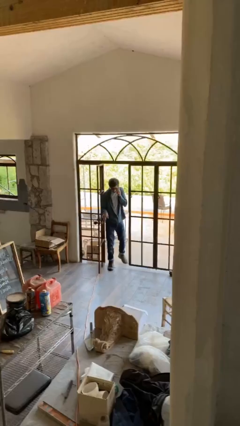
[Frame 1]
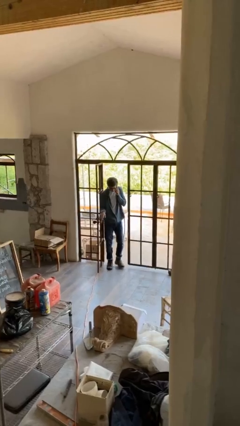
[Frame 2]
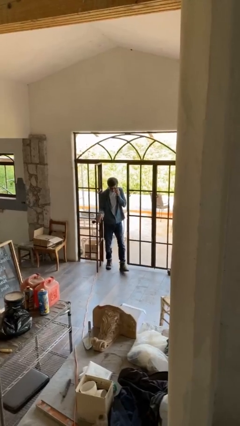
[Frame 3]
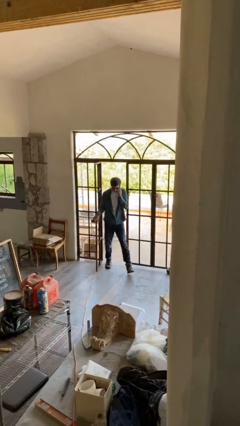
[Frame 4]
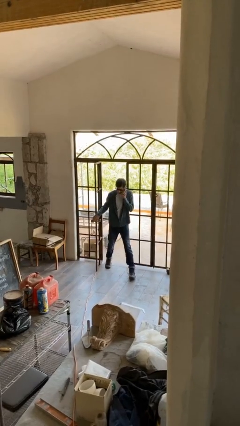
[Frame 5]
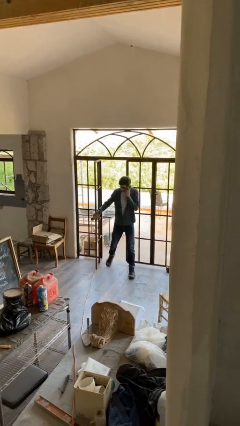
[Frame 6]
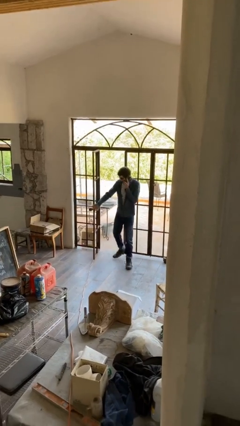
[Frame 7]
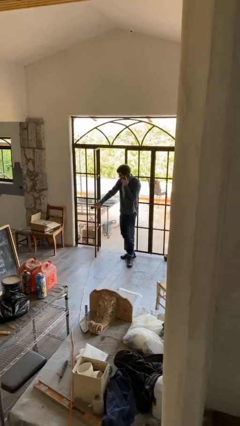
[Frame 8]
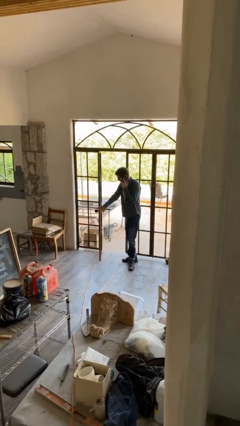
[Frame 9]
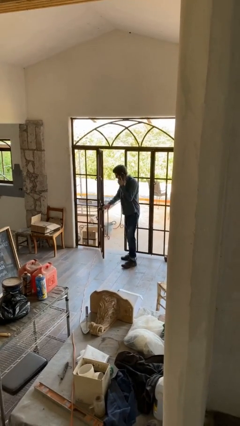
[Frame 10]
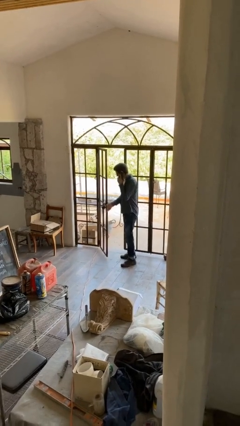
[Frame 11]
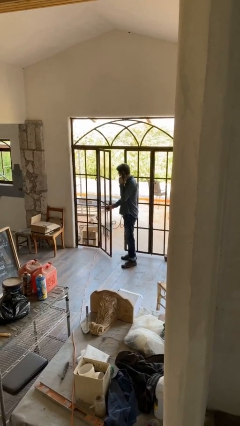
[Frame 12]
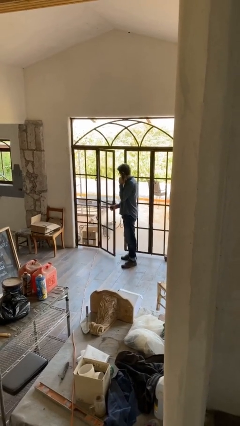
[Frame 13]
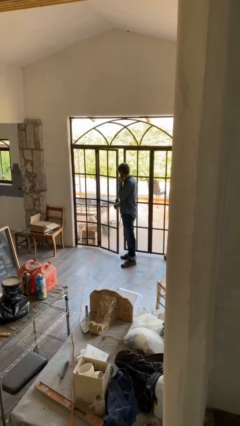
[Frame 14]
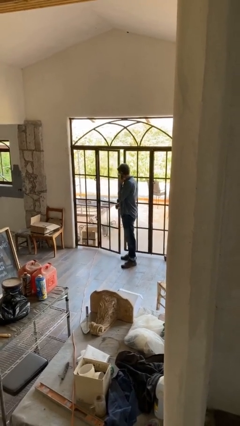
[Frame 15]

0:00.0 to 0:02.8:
person enters scene through structure

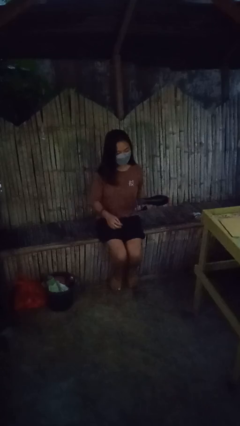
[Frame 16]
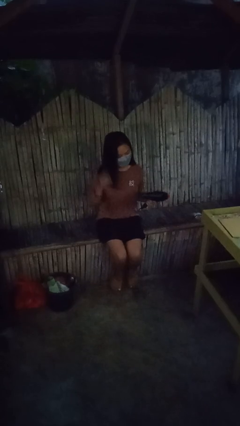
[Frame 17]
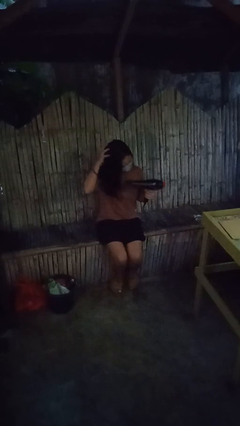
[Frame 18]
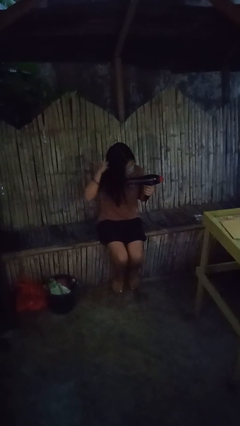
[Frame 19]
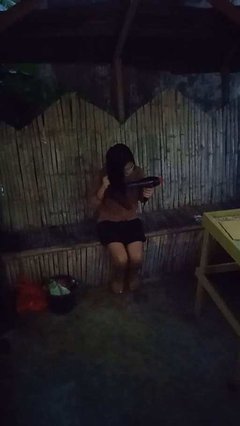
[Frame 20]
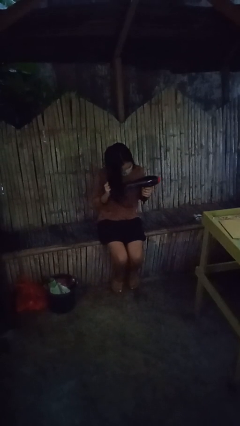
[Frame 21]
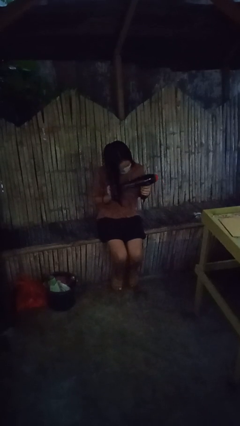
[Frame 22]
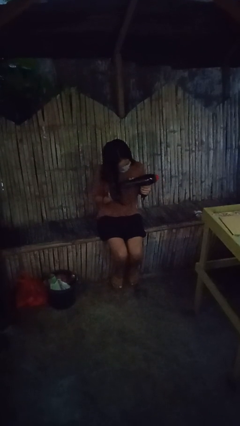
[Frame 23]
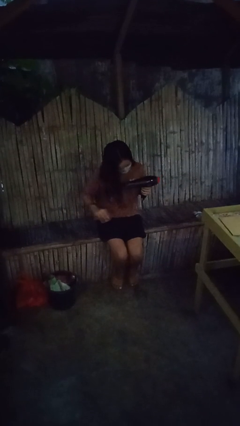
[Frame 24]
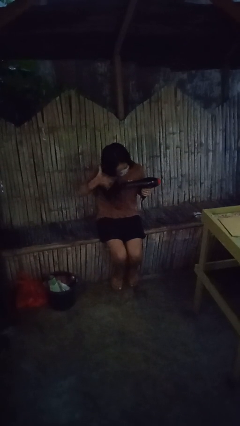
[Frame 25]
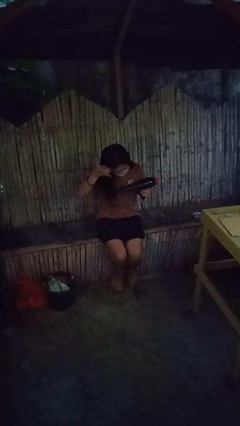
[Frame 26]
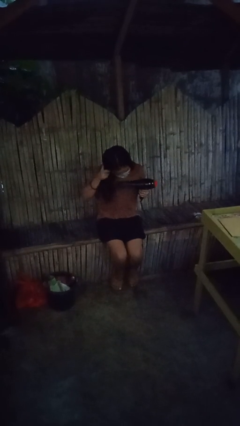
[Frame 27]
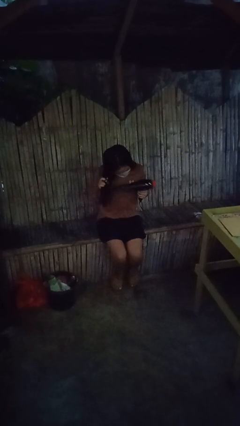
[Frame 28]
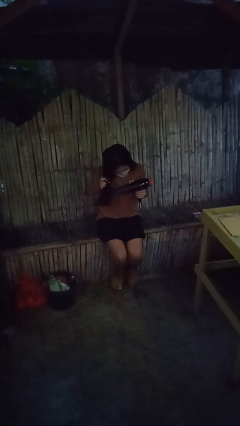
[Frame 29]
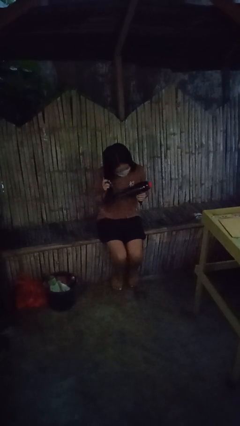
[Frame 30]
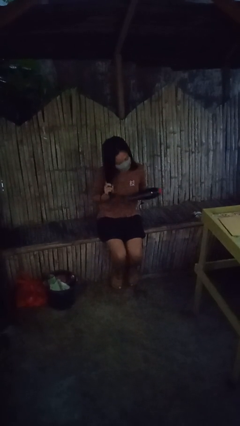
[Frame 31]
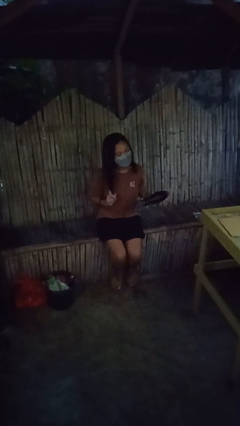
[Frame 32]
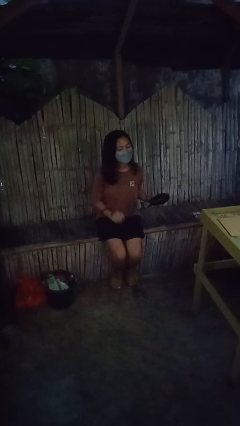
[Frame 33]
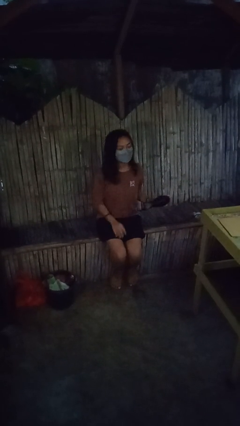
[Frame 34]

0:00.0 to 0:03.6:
person dries hair with hairdryer

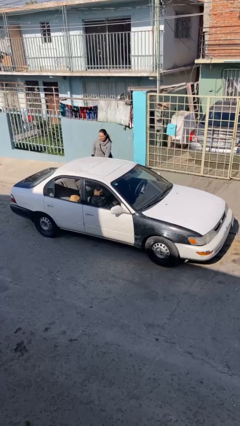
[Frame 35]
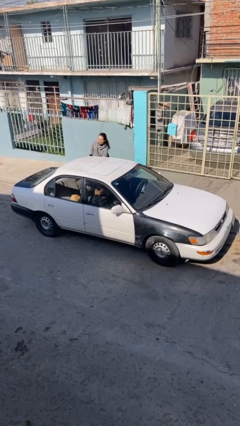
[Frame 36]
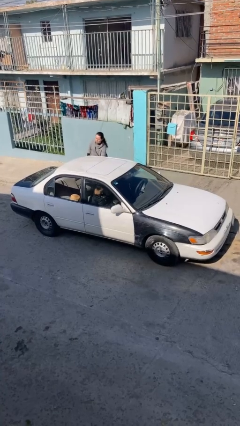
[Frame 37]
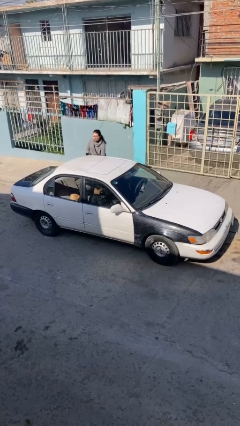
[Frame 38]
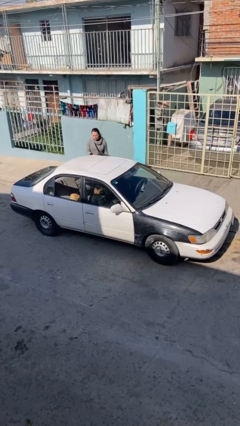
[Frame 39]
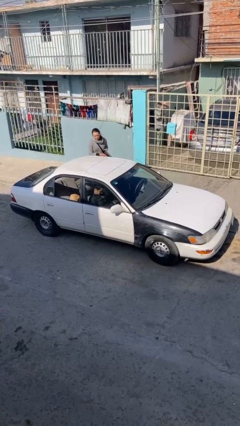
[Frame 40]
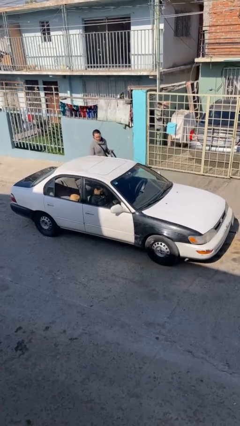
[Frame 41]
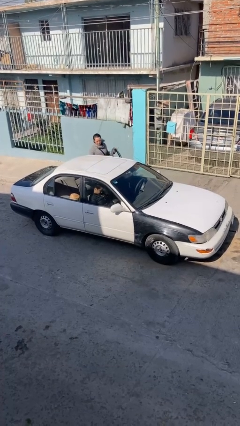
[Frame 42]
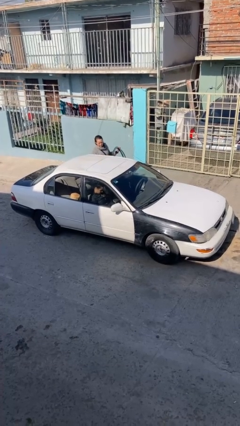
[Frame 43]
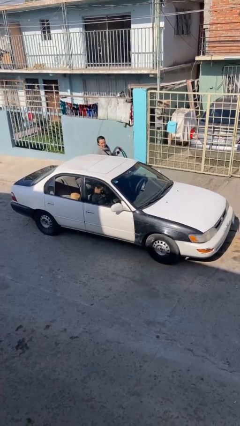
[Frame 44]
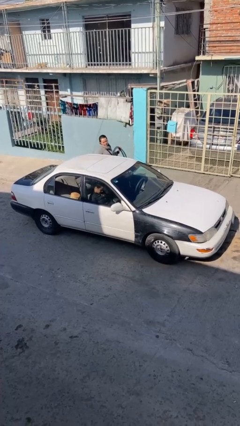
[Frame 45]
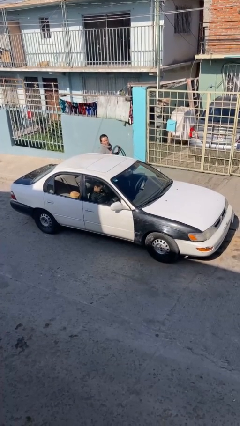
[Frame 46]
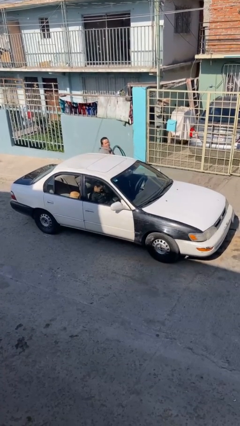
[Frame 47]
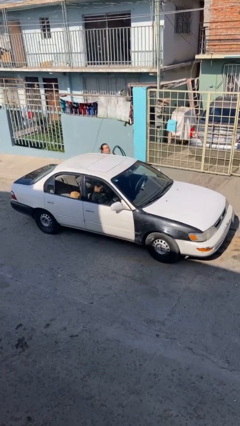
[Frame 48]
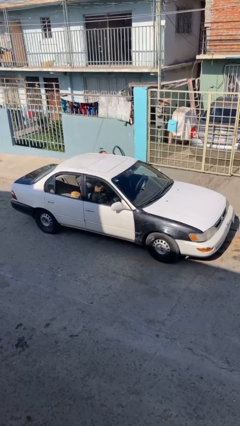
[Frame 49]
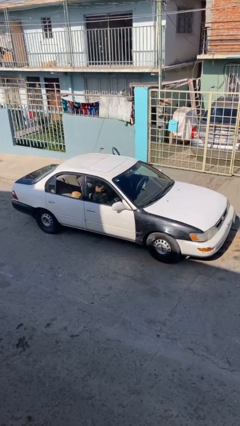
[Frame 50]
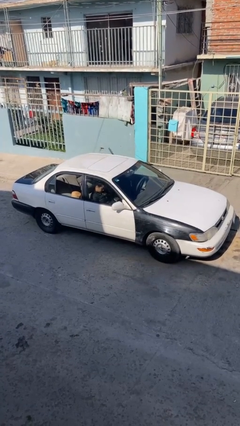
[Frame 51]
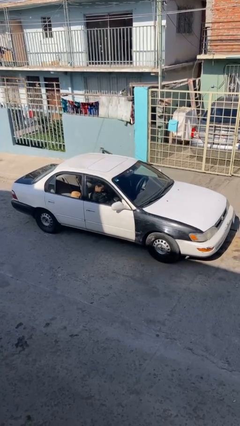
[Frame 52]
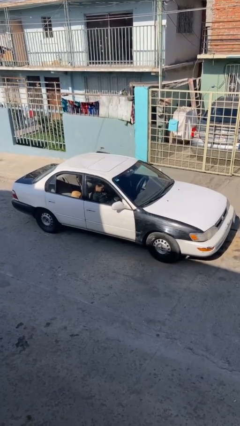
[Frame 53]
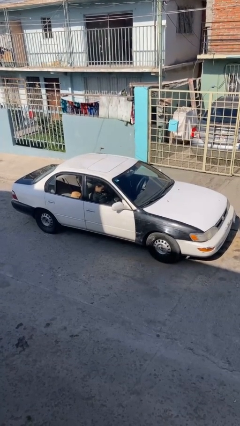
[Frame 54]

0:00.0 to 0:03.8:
car picks up person

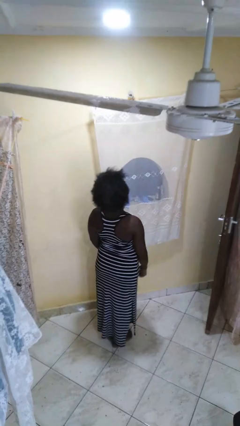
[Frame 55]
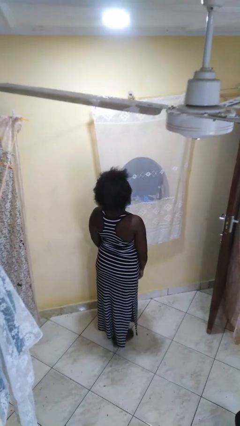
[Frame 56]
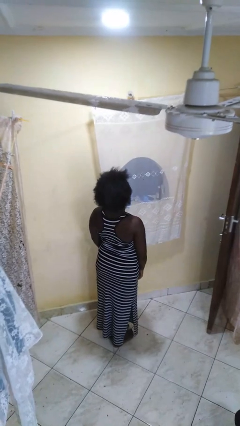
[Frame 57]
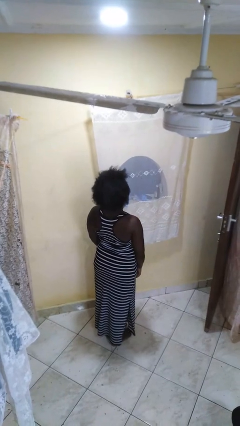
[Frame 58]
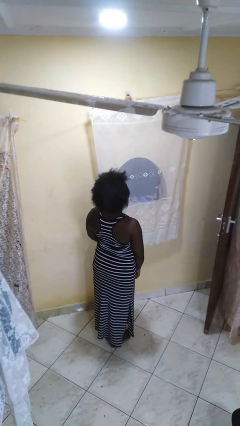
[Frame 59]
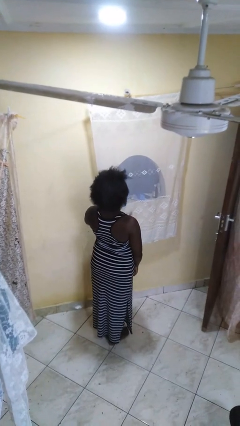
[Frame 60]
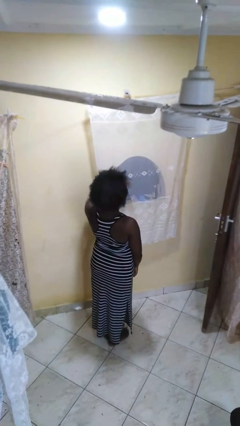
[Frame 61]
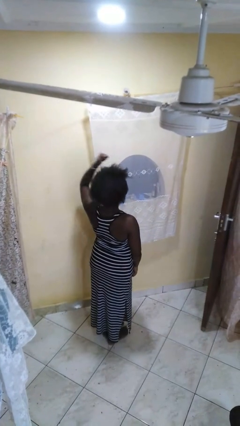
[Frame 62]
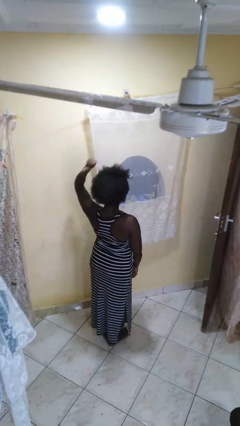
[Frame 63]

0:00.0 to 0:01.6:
person gestures behind me

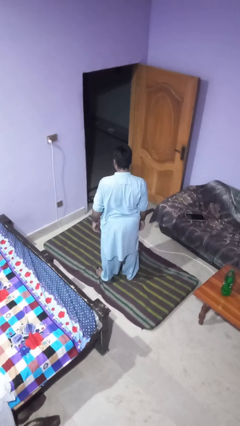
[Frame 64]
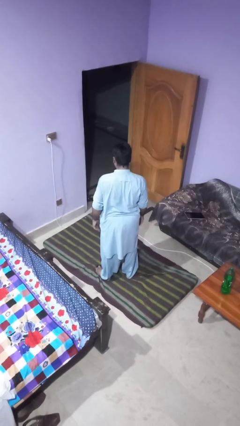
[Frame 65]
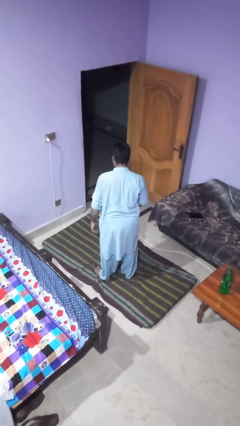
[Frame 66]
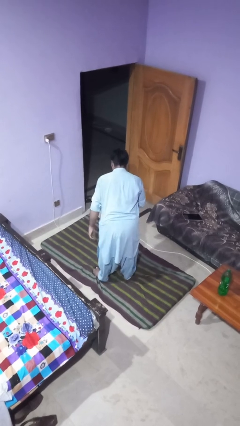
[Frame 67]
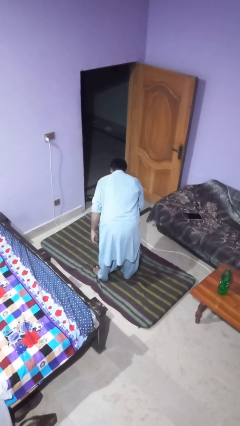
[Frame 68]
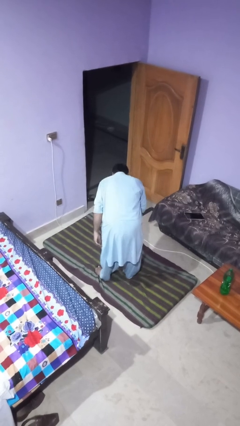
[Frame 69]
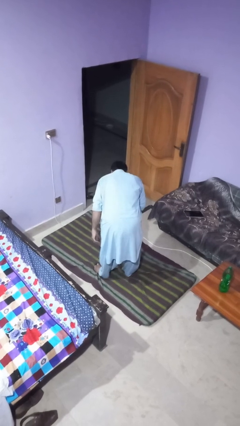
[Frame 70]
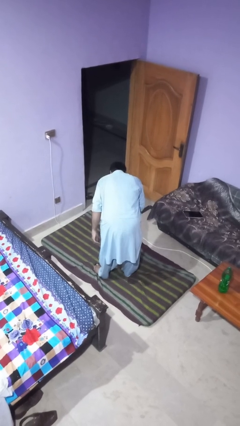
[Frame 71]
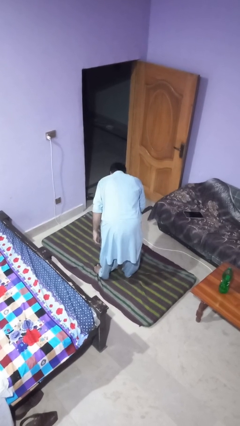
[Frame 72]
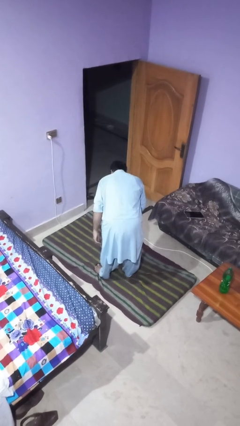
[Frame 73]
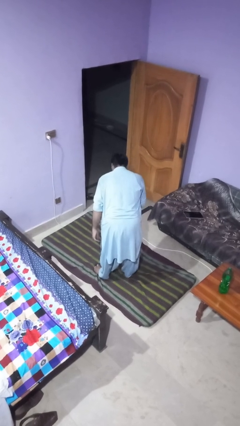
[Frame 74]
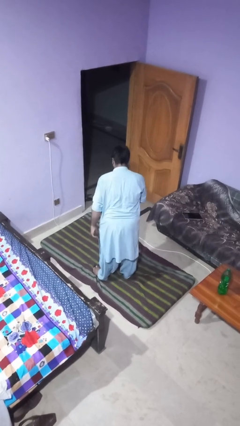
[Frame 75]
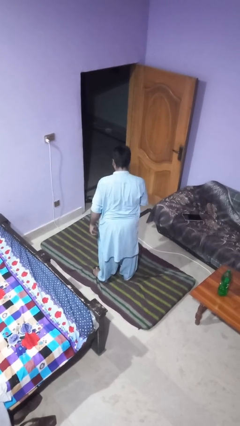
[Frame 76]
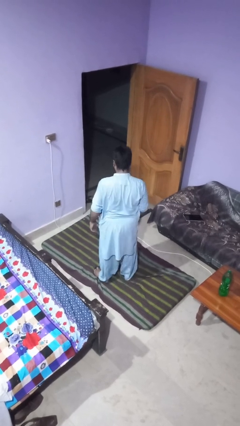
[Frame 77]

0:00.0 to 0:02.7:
person bows

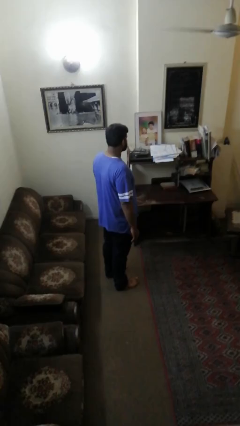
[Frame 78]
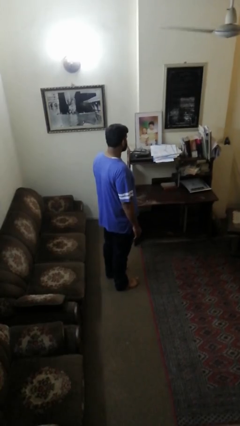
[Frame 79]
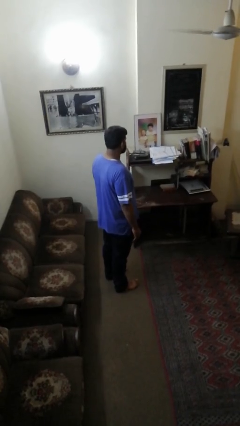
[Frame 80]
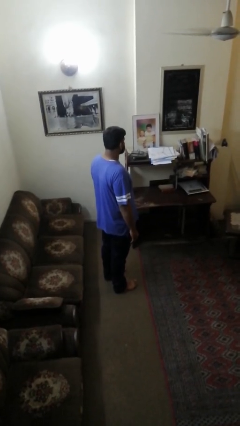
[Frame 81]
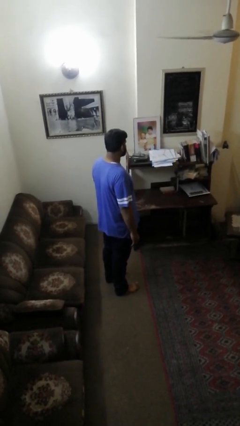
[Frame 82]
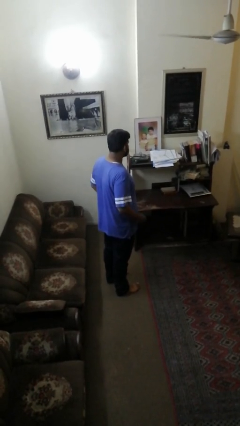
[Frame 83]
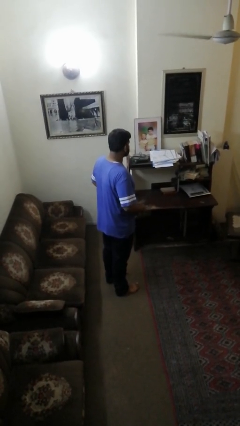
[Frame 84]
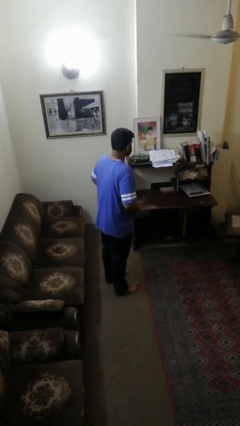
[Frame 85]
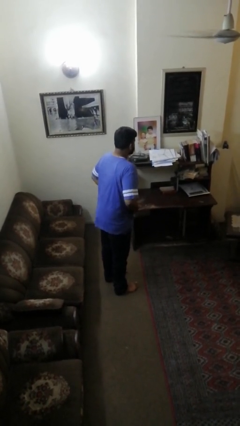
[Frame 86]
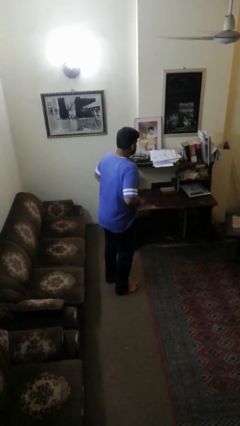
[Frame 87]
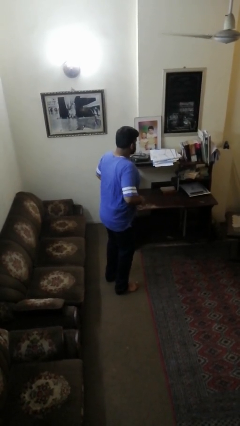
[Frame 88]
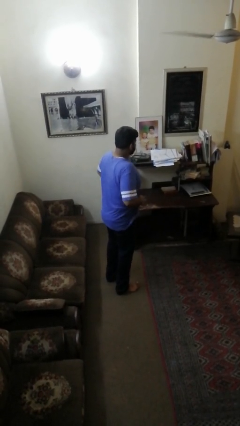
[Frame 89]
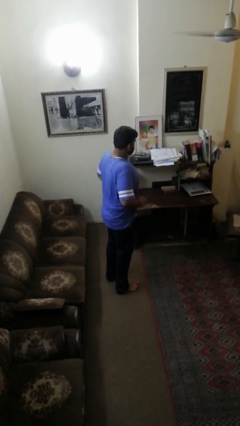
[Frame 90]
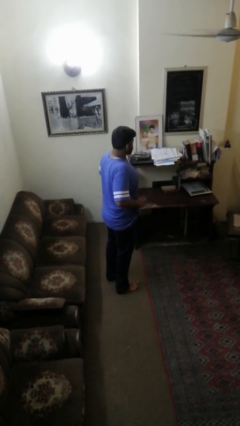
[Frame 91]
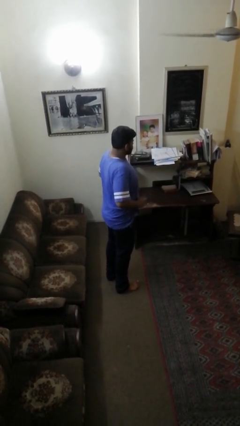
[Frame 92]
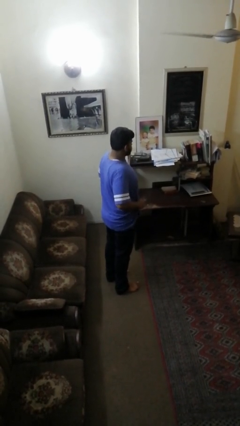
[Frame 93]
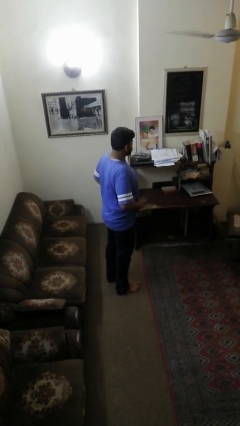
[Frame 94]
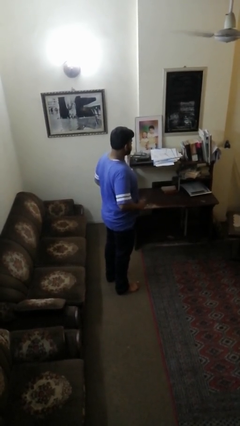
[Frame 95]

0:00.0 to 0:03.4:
person hikes up pants

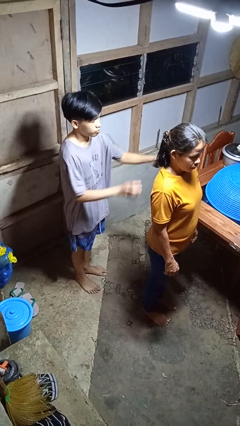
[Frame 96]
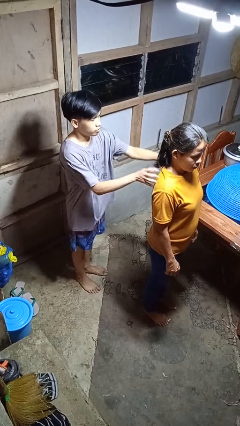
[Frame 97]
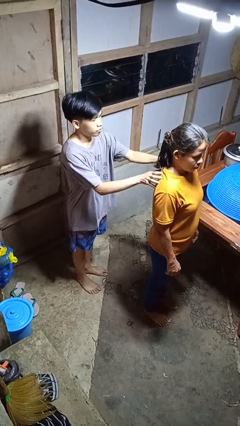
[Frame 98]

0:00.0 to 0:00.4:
person grabs person by shoulder
